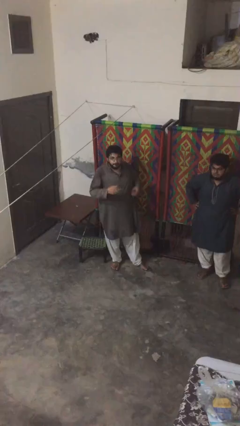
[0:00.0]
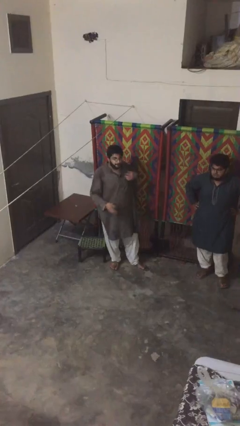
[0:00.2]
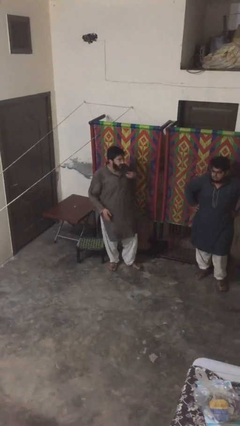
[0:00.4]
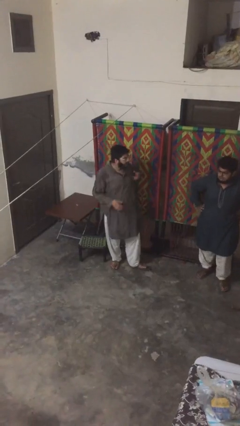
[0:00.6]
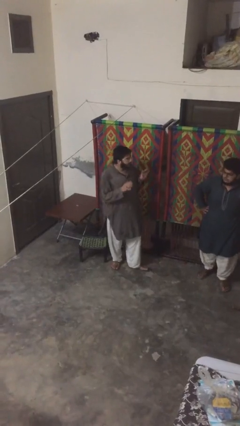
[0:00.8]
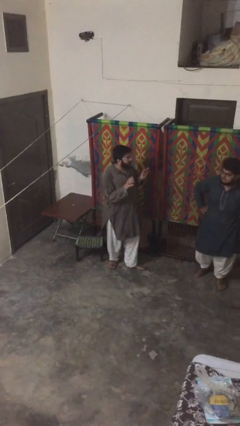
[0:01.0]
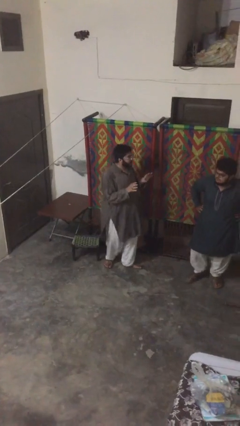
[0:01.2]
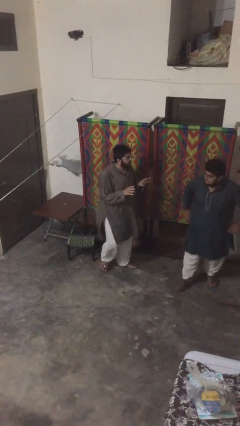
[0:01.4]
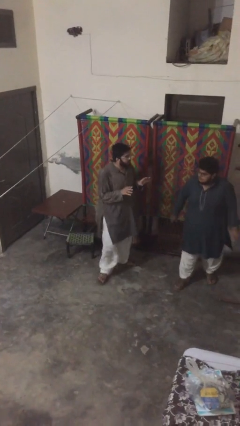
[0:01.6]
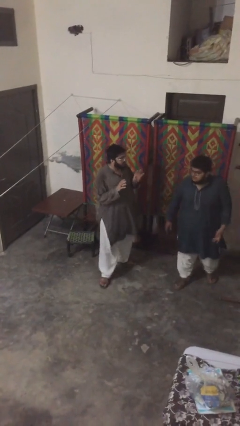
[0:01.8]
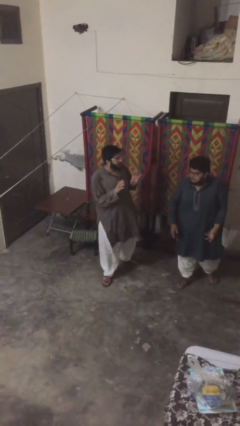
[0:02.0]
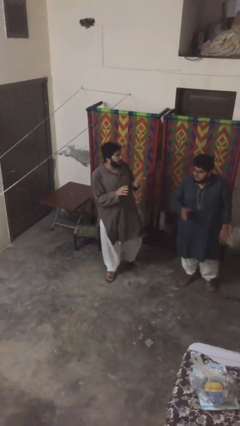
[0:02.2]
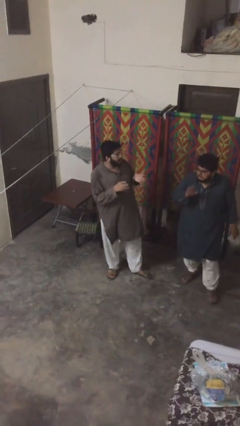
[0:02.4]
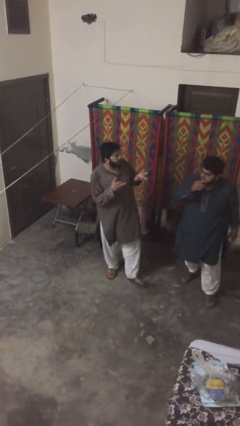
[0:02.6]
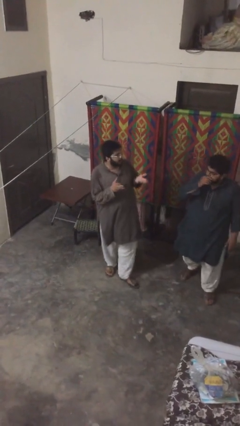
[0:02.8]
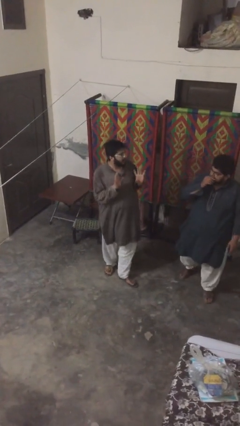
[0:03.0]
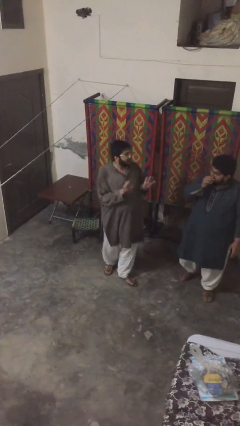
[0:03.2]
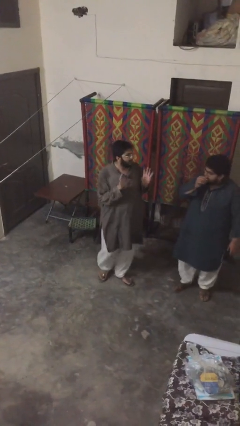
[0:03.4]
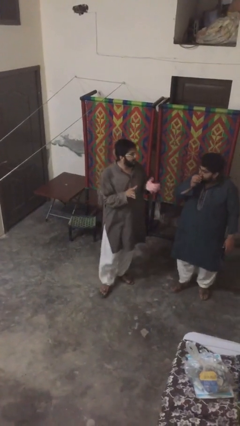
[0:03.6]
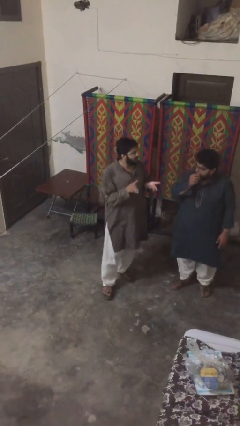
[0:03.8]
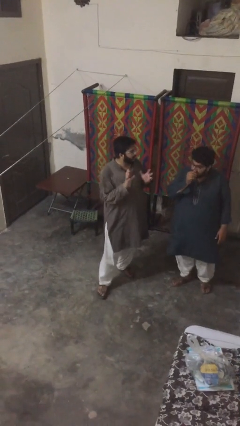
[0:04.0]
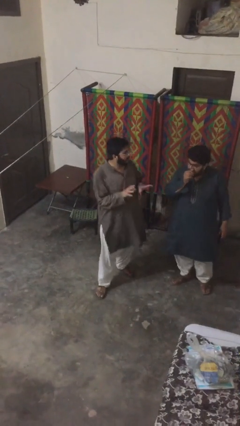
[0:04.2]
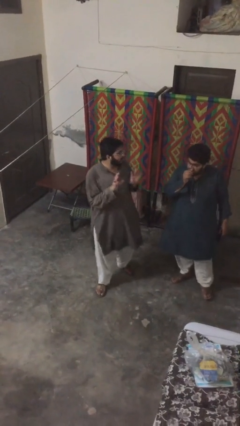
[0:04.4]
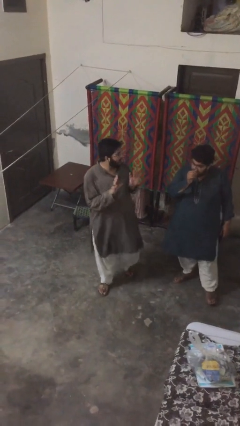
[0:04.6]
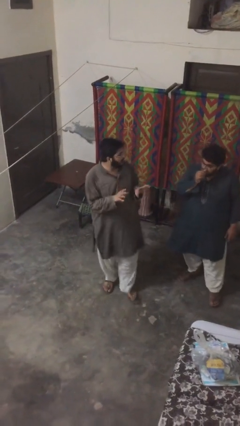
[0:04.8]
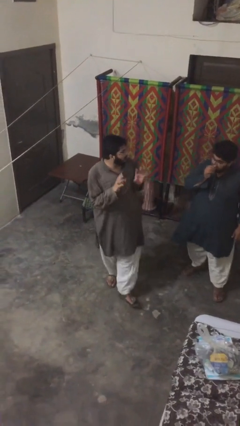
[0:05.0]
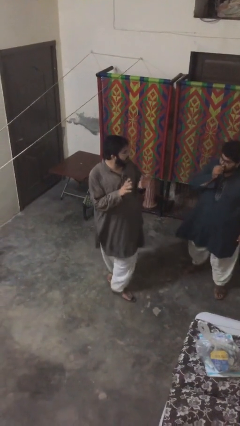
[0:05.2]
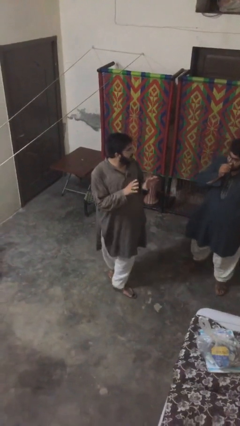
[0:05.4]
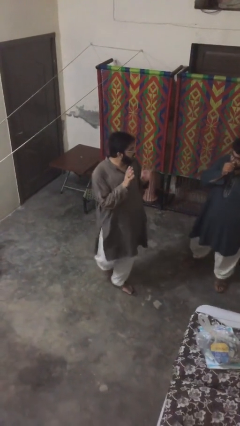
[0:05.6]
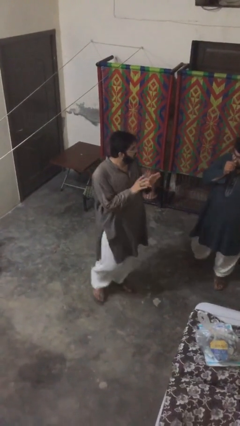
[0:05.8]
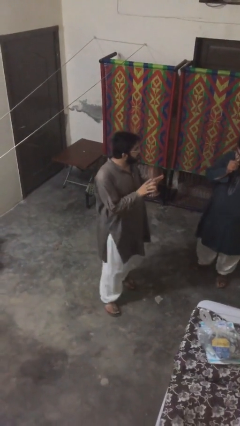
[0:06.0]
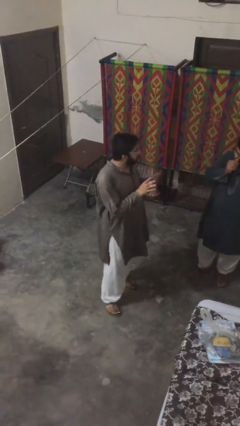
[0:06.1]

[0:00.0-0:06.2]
person talks to person

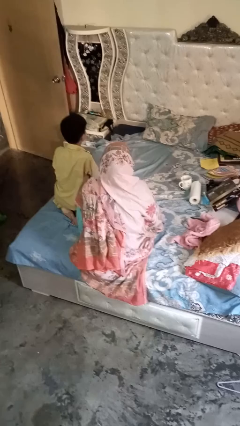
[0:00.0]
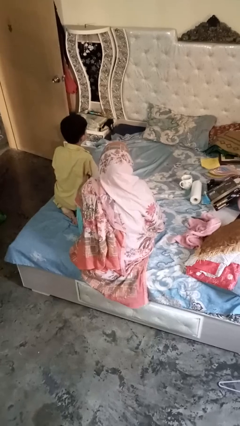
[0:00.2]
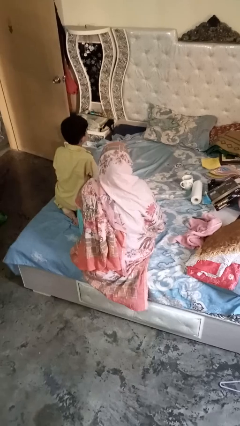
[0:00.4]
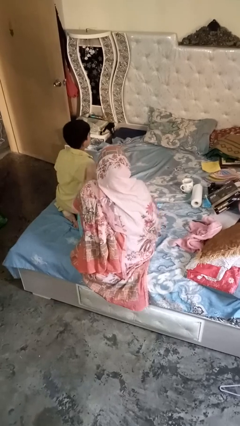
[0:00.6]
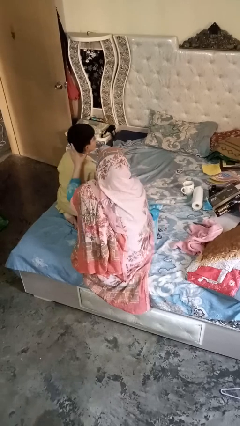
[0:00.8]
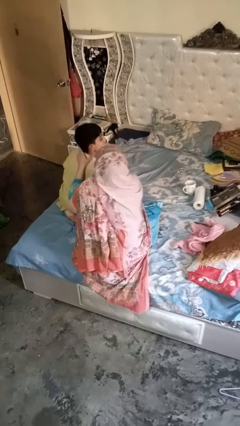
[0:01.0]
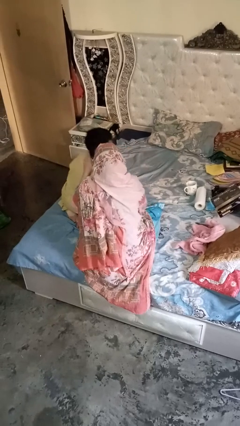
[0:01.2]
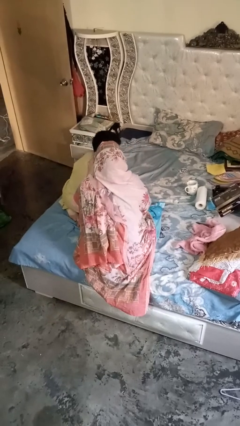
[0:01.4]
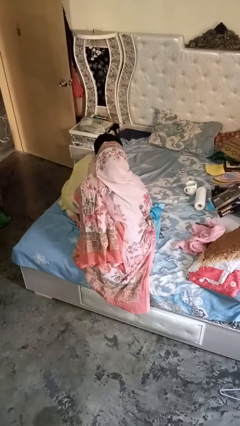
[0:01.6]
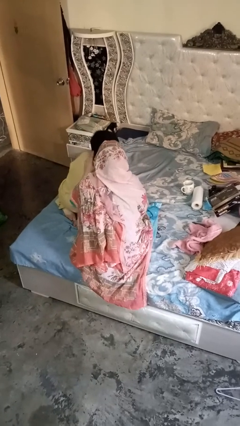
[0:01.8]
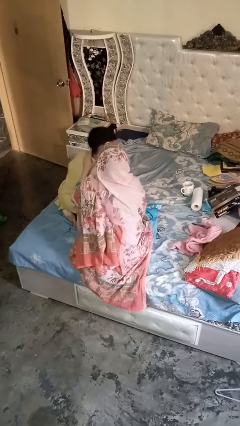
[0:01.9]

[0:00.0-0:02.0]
person gestures blow kiss

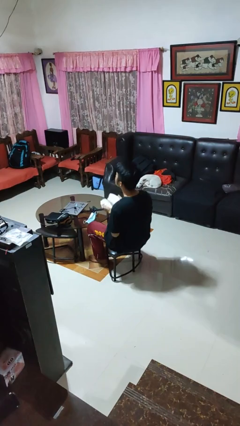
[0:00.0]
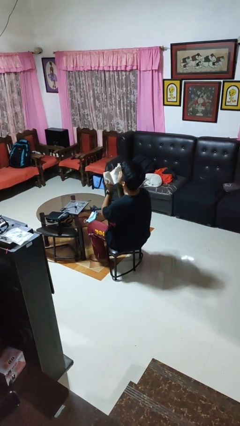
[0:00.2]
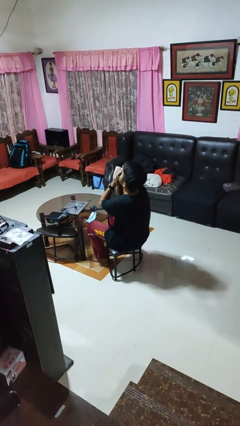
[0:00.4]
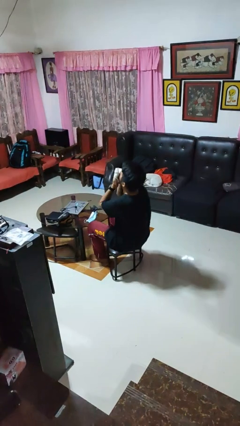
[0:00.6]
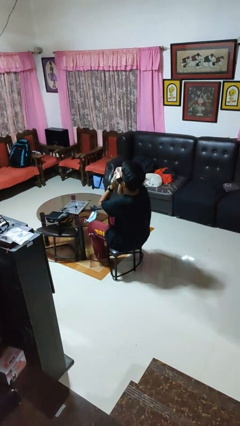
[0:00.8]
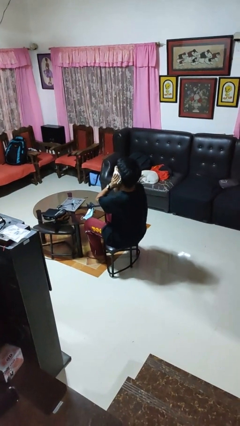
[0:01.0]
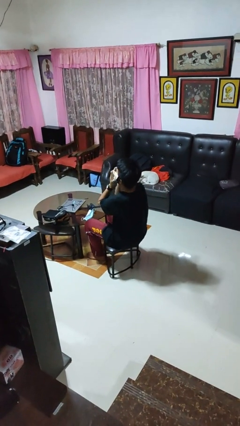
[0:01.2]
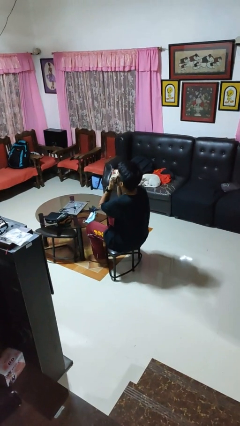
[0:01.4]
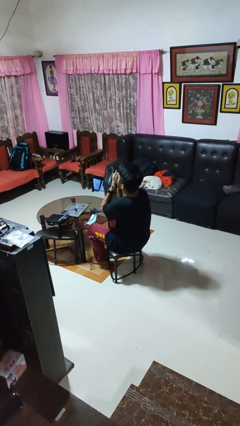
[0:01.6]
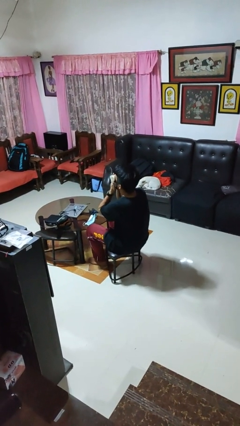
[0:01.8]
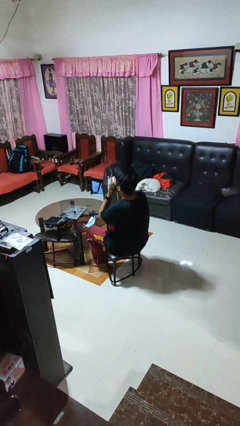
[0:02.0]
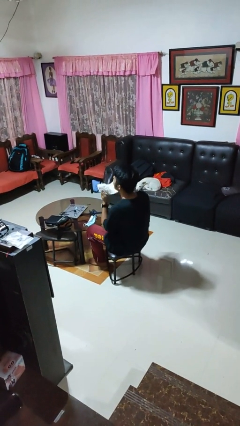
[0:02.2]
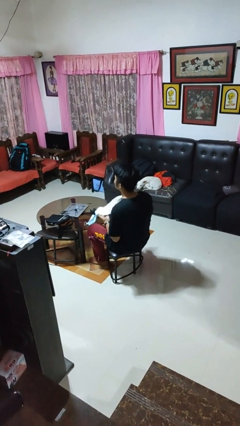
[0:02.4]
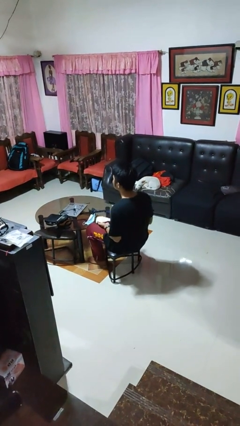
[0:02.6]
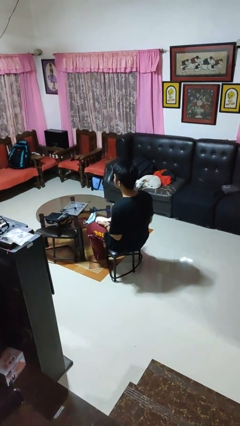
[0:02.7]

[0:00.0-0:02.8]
person wipes mouth with napkin

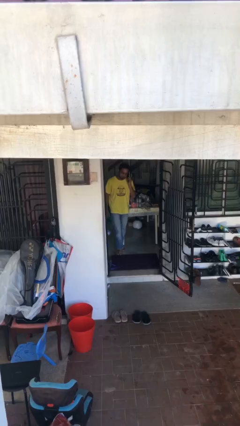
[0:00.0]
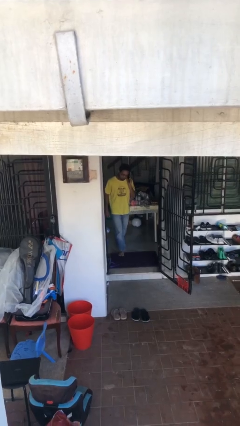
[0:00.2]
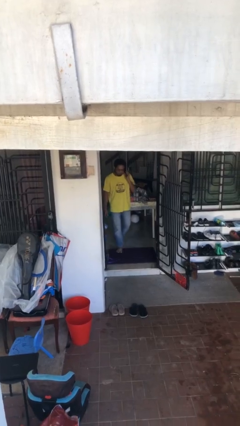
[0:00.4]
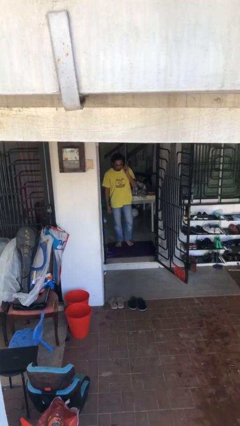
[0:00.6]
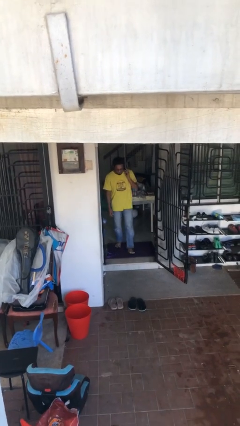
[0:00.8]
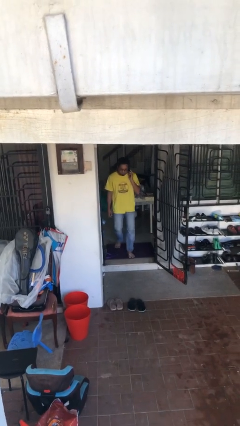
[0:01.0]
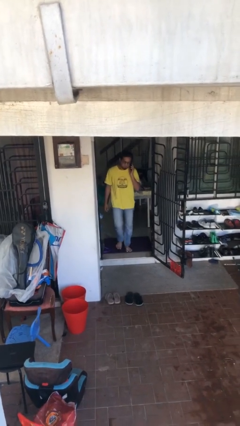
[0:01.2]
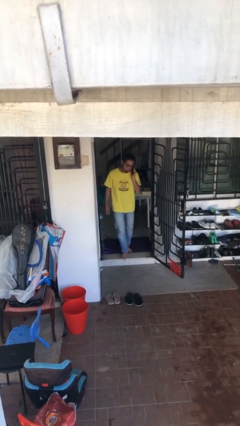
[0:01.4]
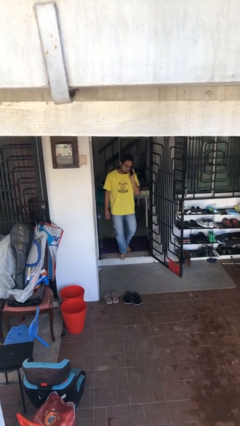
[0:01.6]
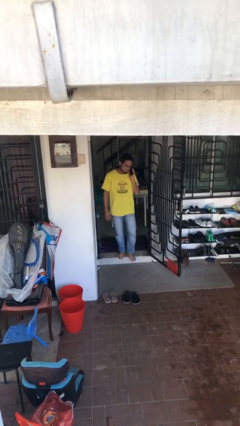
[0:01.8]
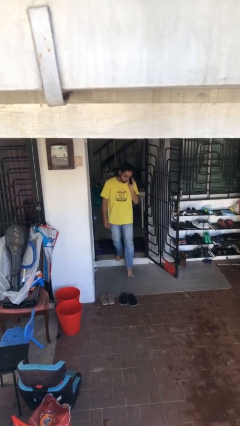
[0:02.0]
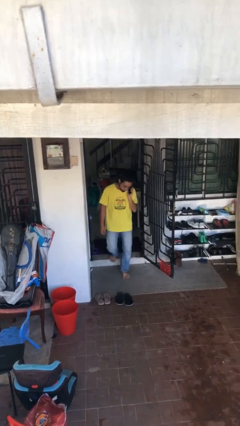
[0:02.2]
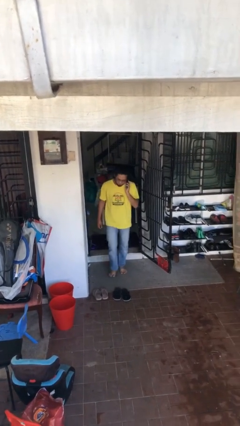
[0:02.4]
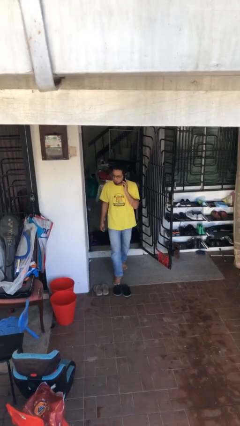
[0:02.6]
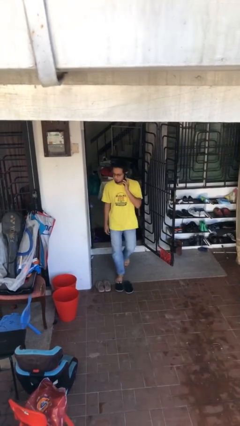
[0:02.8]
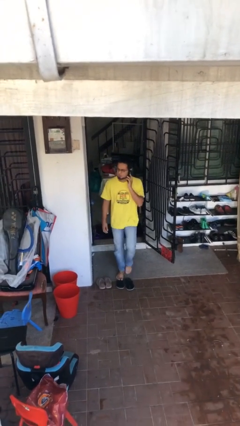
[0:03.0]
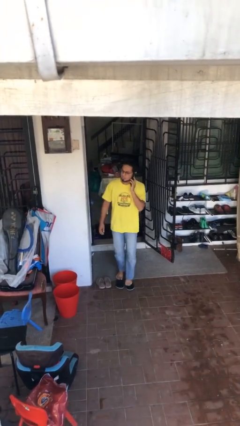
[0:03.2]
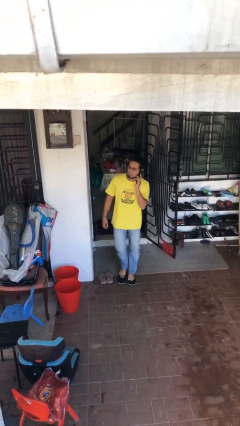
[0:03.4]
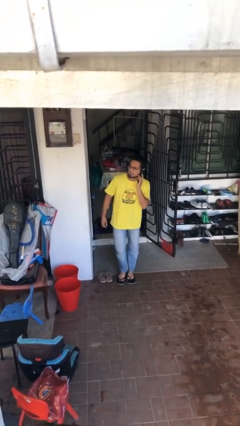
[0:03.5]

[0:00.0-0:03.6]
person enters scene through structure

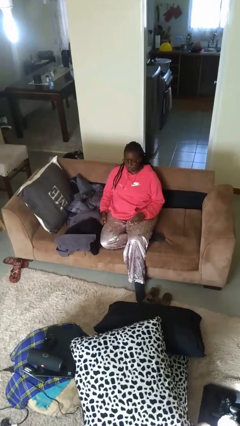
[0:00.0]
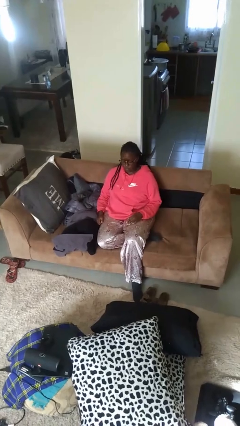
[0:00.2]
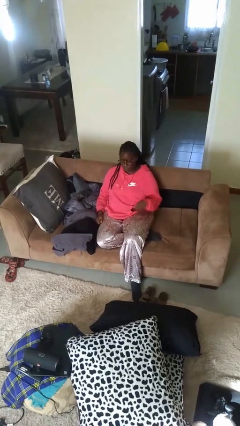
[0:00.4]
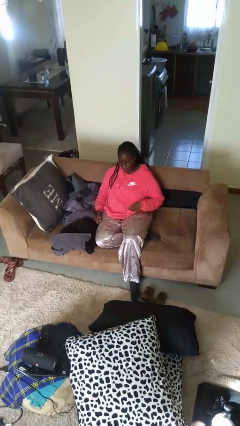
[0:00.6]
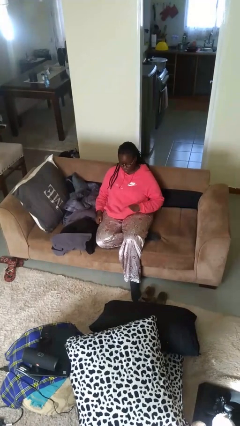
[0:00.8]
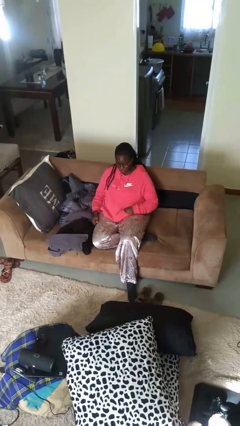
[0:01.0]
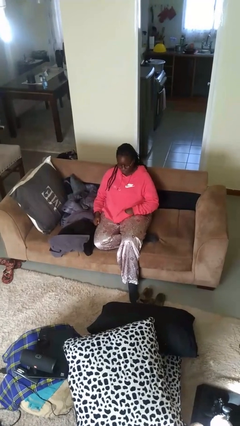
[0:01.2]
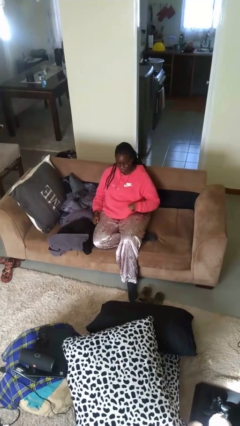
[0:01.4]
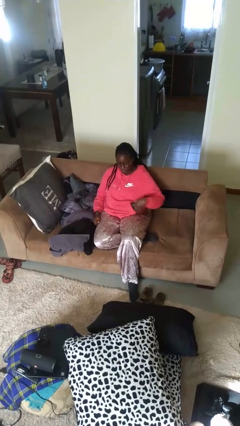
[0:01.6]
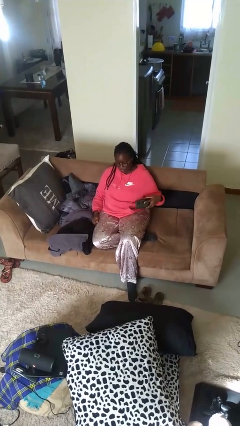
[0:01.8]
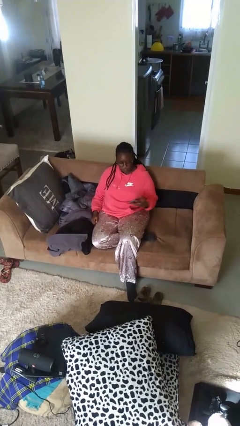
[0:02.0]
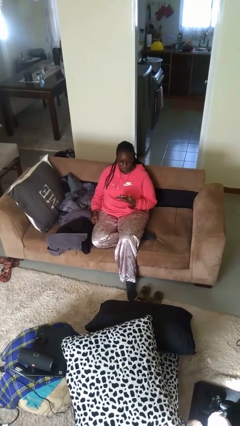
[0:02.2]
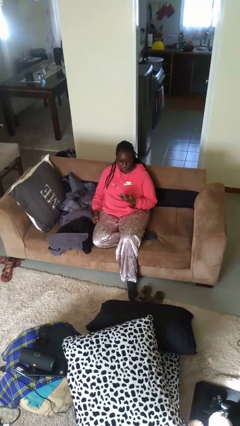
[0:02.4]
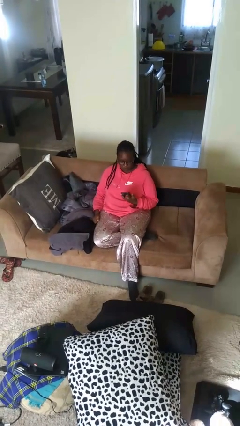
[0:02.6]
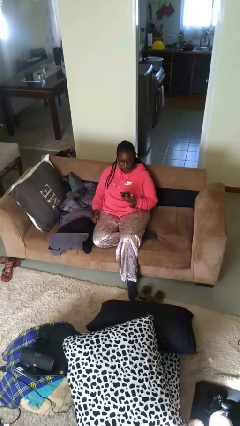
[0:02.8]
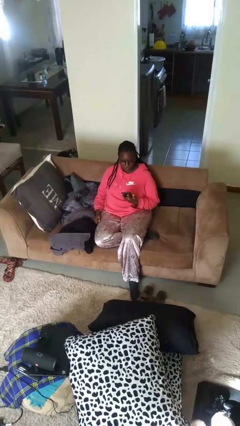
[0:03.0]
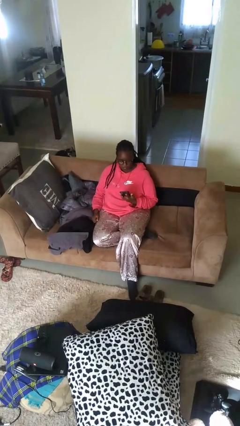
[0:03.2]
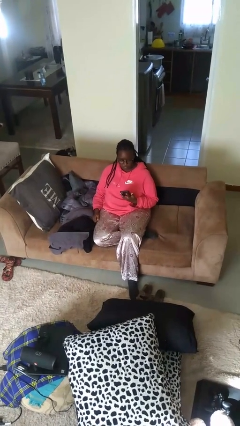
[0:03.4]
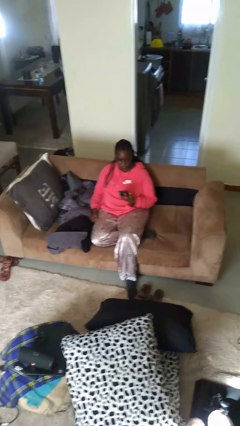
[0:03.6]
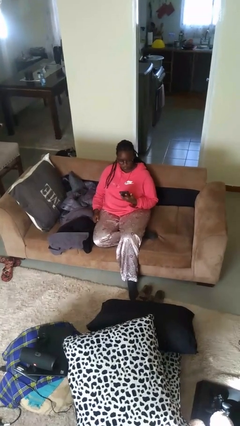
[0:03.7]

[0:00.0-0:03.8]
person takes phone from pocket
